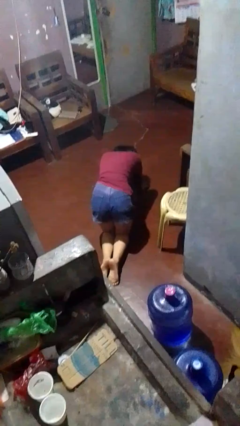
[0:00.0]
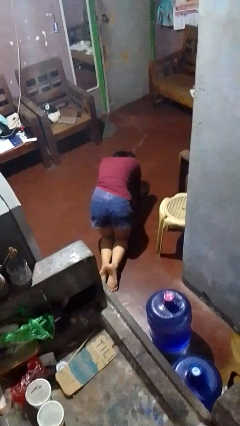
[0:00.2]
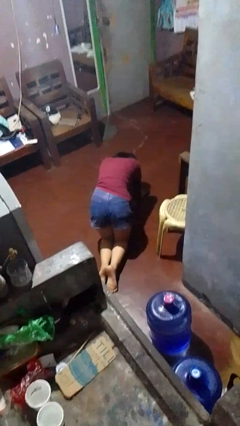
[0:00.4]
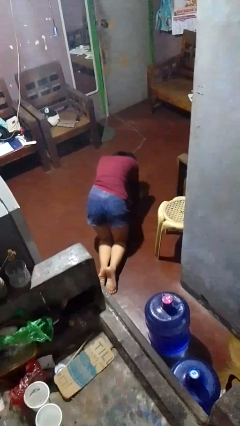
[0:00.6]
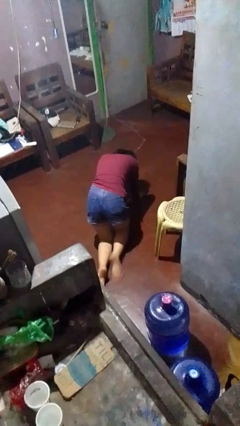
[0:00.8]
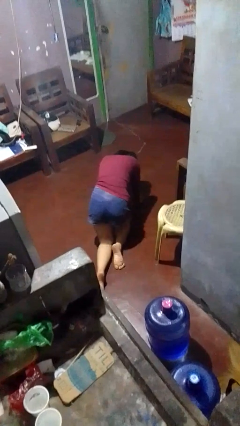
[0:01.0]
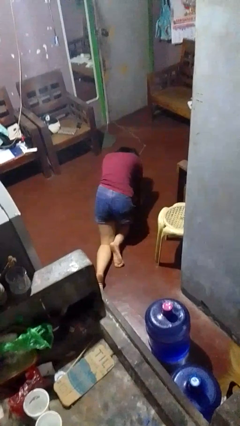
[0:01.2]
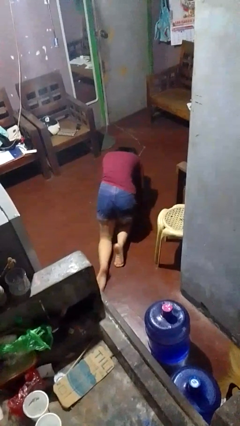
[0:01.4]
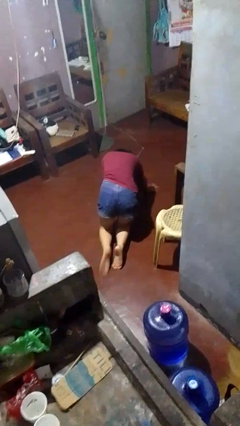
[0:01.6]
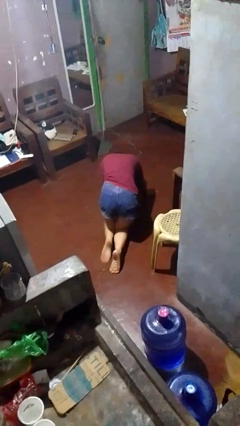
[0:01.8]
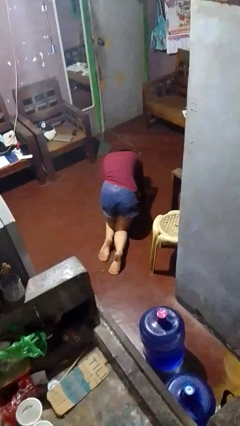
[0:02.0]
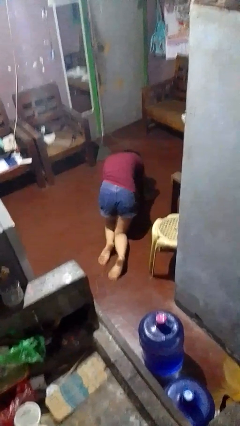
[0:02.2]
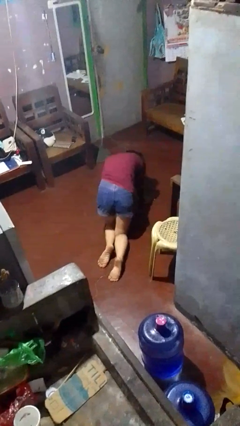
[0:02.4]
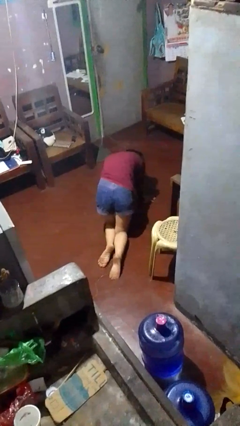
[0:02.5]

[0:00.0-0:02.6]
person crawls

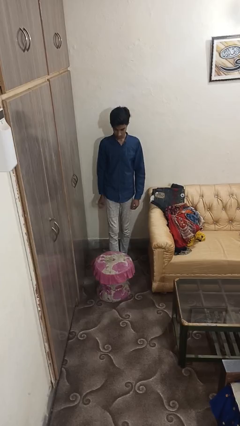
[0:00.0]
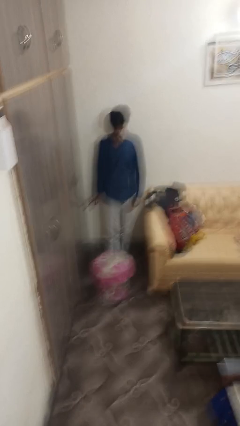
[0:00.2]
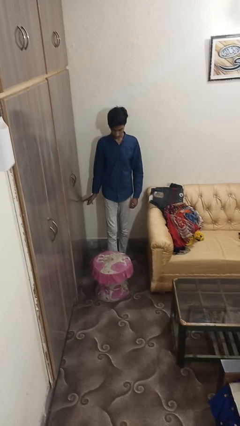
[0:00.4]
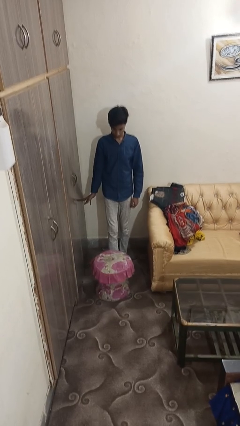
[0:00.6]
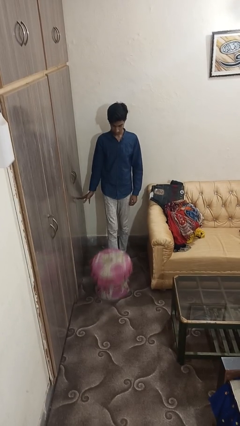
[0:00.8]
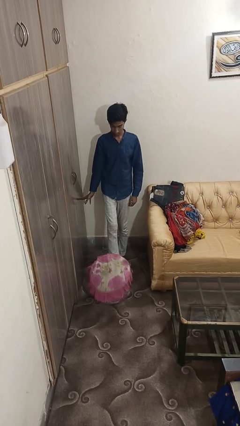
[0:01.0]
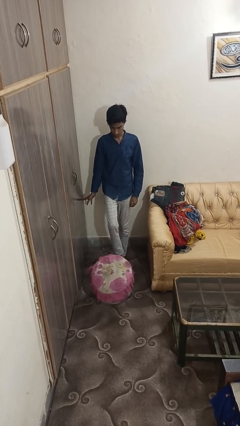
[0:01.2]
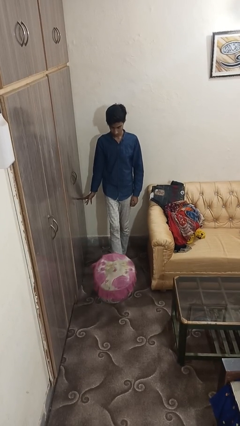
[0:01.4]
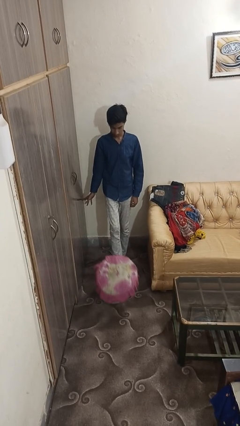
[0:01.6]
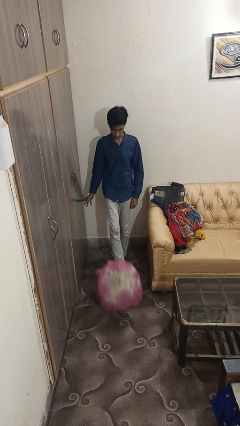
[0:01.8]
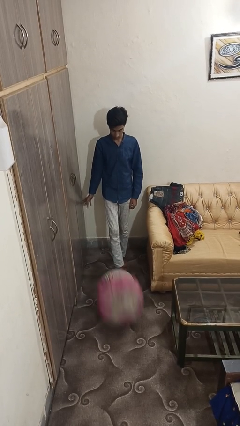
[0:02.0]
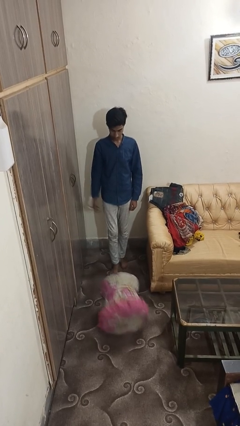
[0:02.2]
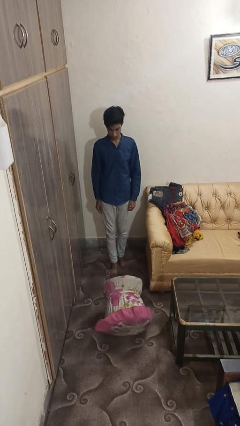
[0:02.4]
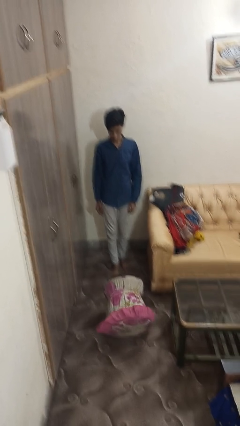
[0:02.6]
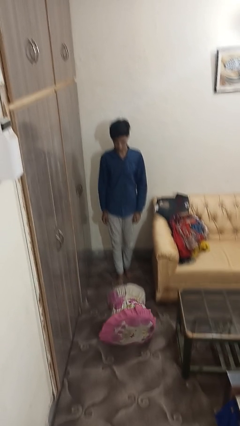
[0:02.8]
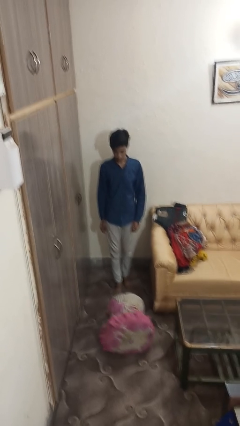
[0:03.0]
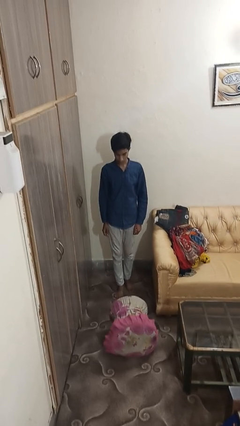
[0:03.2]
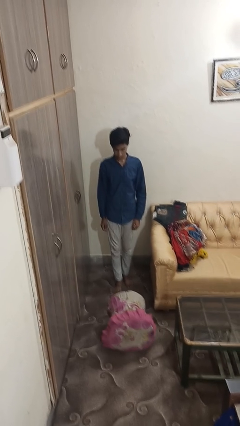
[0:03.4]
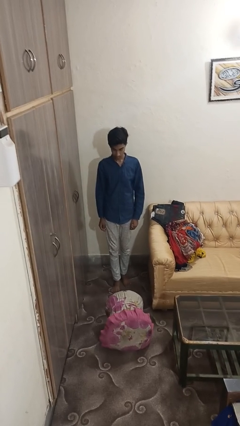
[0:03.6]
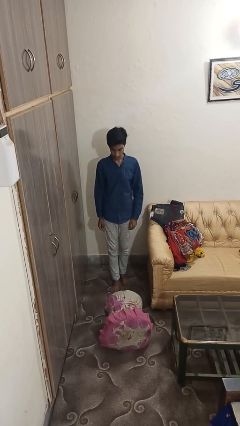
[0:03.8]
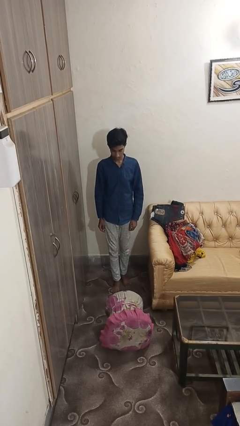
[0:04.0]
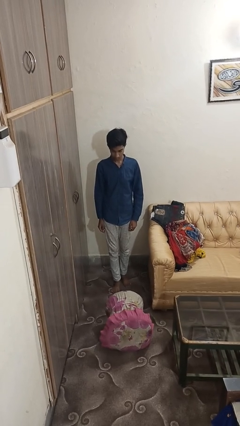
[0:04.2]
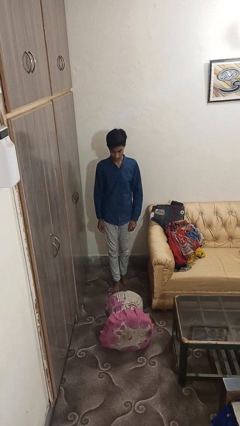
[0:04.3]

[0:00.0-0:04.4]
person knocks over furniture

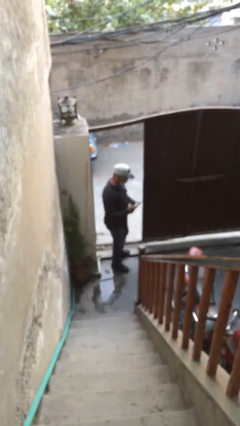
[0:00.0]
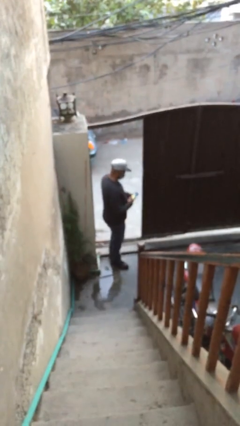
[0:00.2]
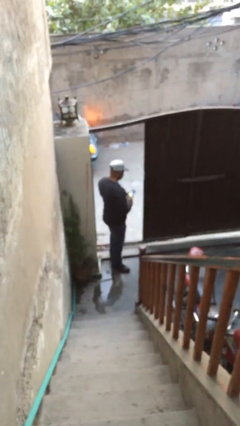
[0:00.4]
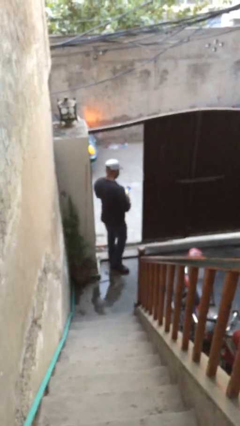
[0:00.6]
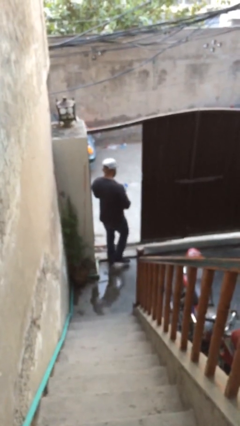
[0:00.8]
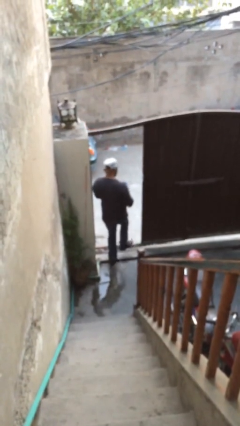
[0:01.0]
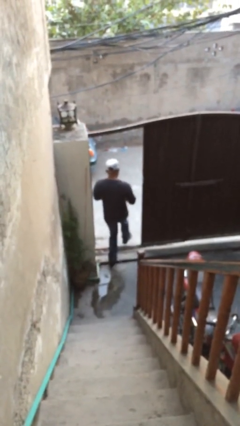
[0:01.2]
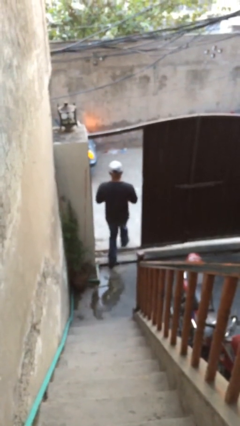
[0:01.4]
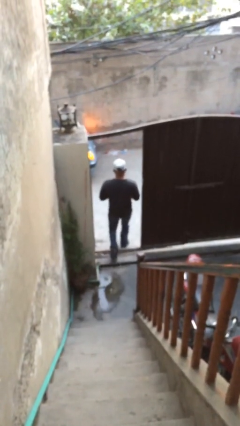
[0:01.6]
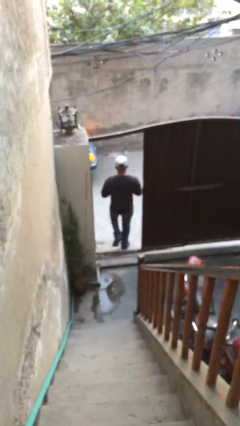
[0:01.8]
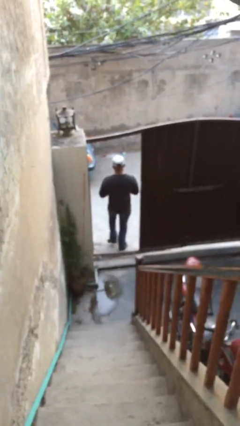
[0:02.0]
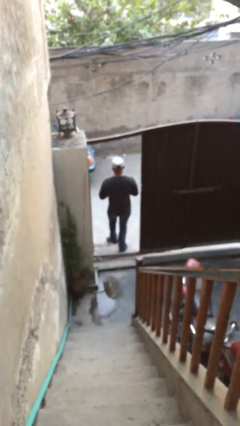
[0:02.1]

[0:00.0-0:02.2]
person exits scene through structure

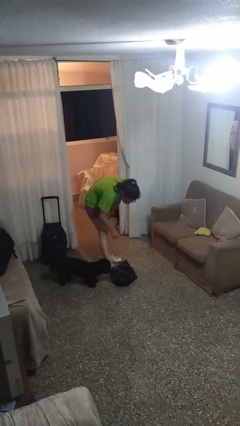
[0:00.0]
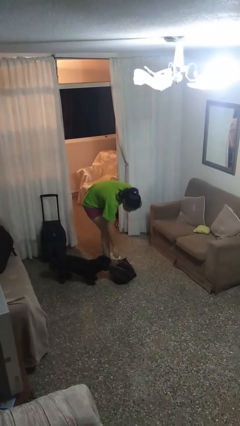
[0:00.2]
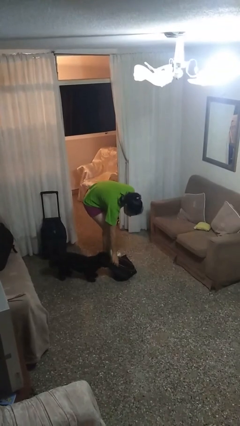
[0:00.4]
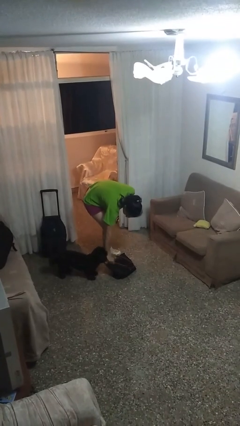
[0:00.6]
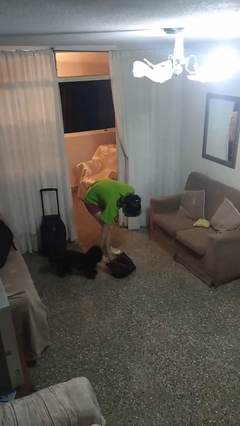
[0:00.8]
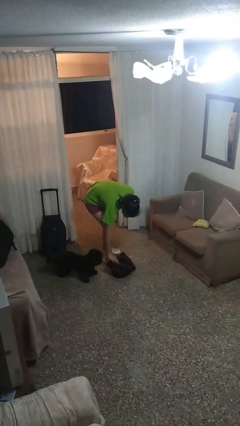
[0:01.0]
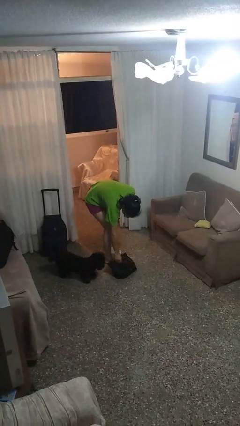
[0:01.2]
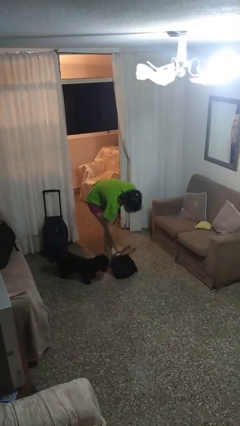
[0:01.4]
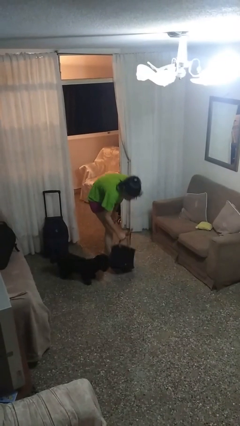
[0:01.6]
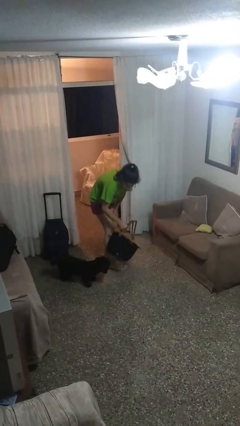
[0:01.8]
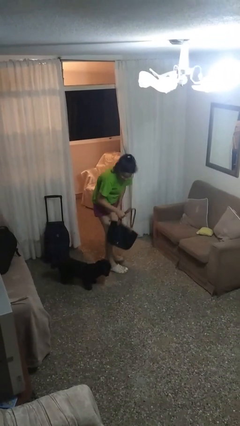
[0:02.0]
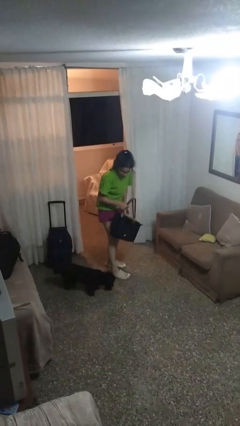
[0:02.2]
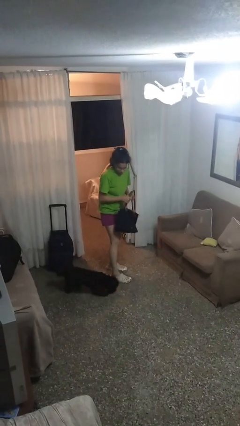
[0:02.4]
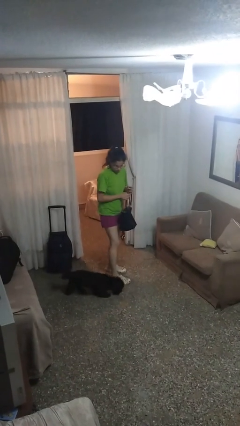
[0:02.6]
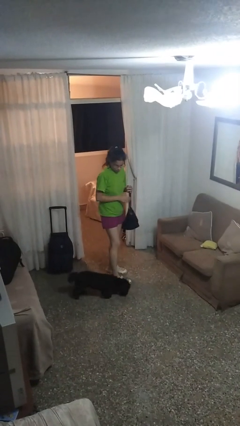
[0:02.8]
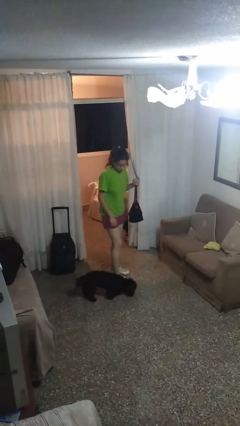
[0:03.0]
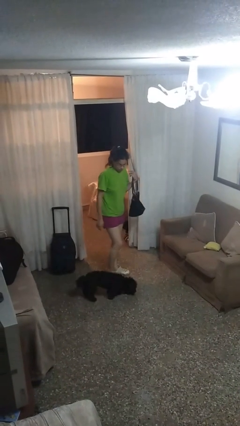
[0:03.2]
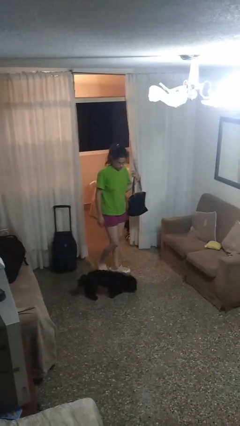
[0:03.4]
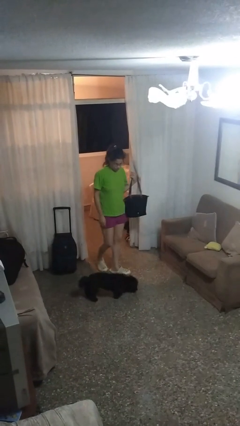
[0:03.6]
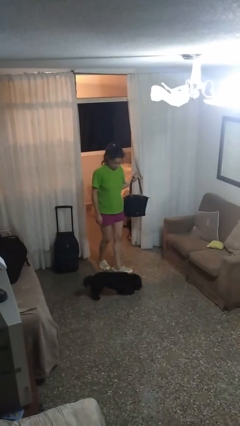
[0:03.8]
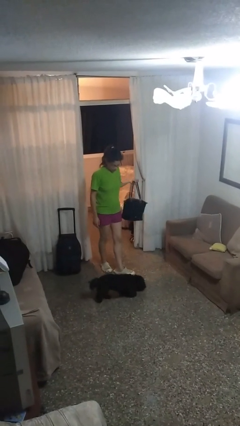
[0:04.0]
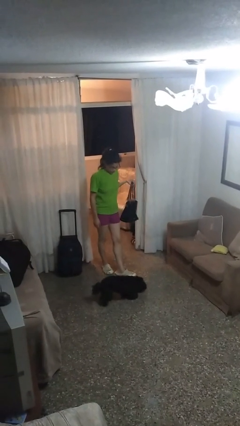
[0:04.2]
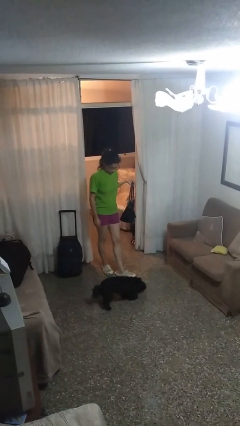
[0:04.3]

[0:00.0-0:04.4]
person picks up object from floor

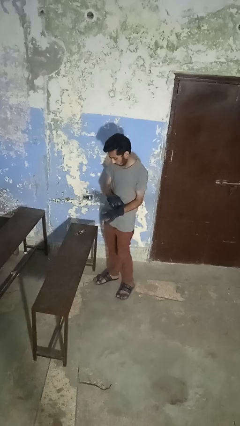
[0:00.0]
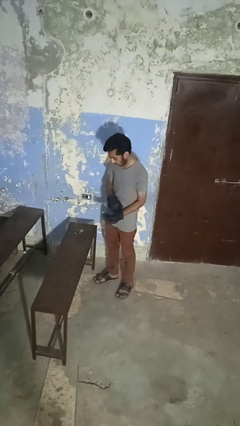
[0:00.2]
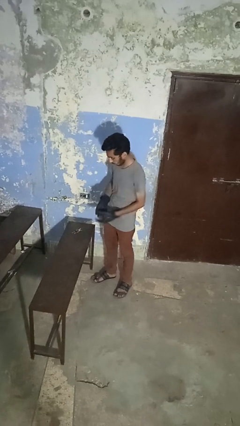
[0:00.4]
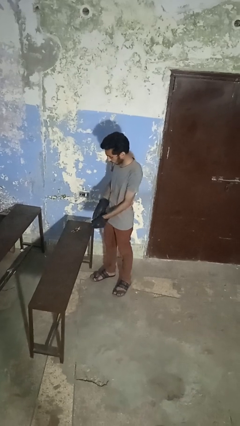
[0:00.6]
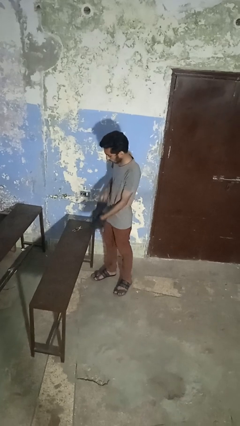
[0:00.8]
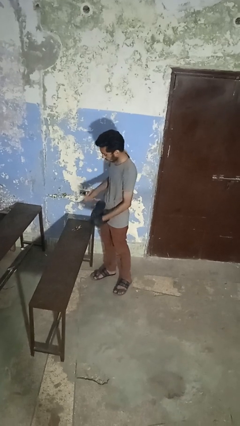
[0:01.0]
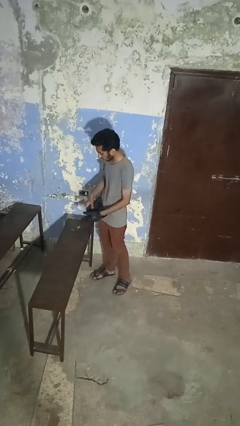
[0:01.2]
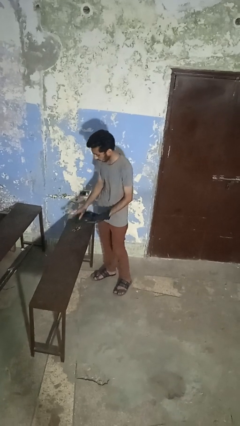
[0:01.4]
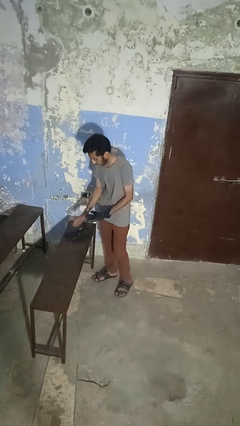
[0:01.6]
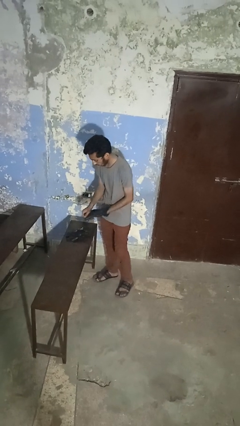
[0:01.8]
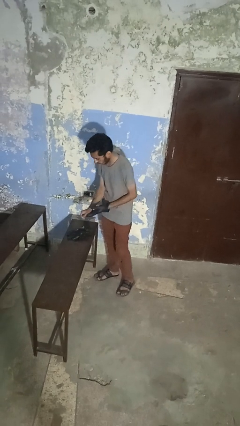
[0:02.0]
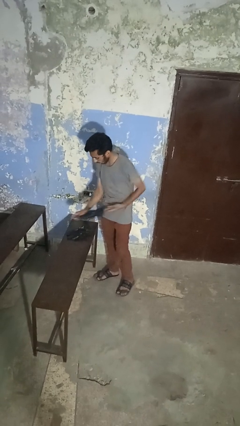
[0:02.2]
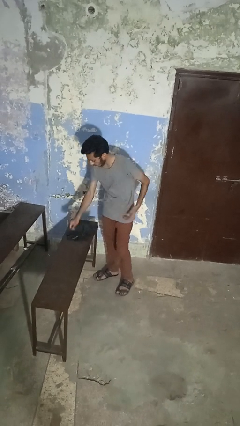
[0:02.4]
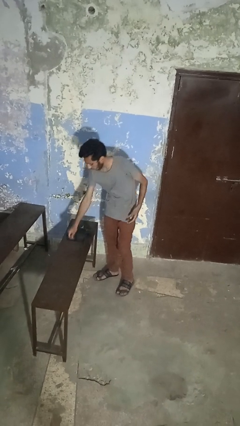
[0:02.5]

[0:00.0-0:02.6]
person takes off gloves

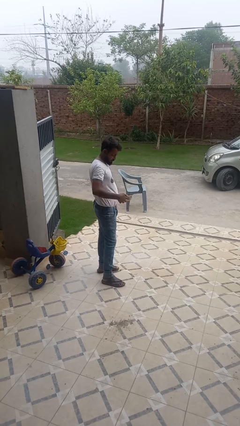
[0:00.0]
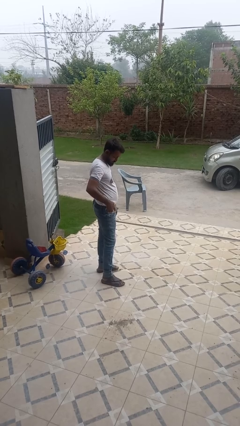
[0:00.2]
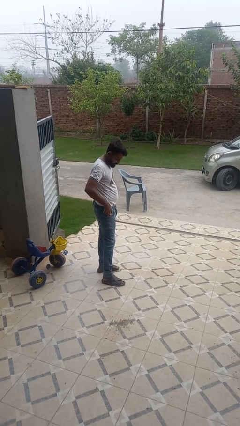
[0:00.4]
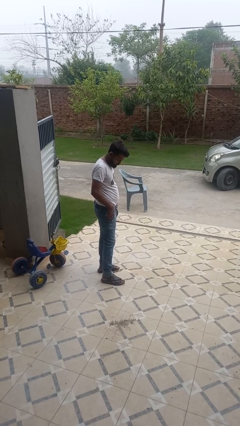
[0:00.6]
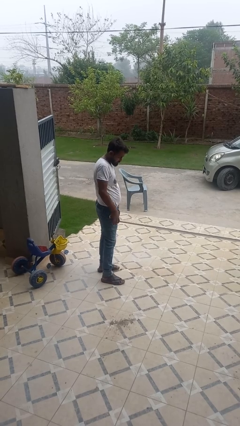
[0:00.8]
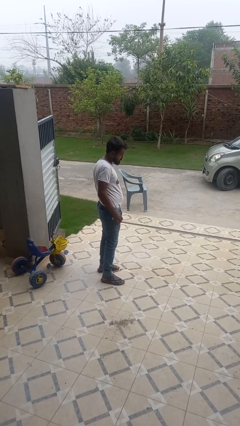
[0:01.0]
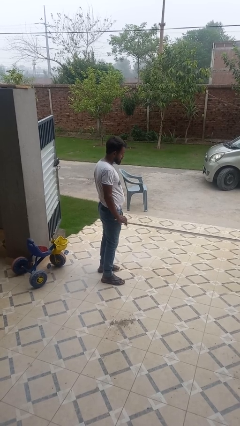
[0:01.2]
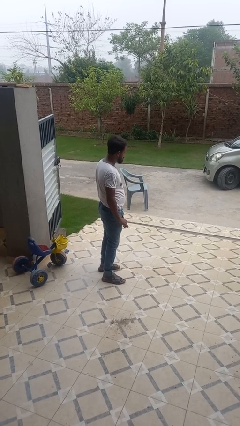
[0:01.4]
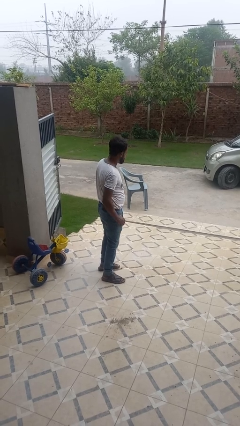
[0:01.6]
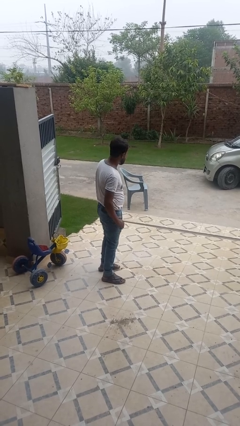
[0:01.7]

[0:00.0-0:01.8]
person puts phone into pocket
